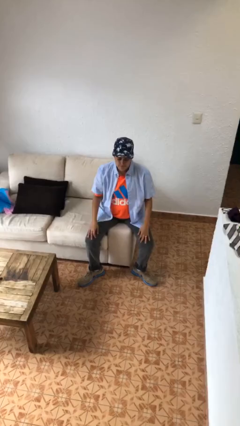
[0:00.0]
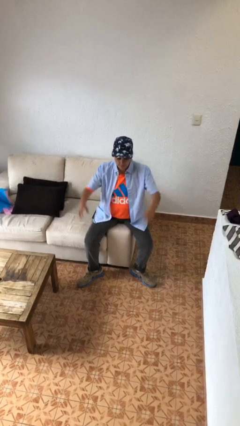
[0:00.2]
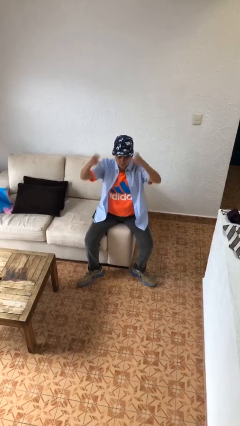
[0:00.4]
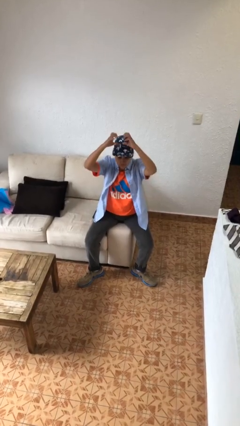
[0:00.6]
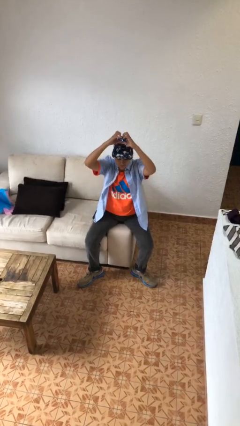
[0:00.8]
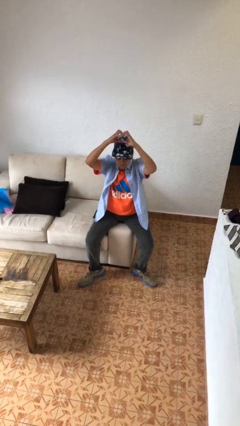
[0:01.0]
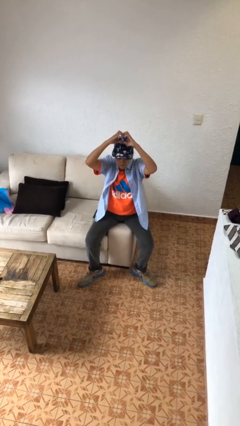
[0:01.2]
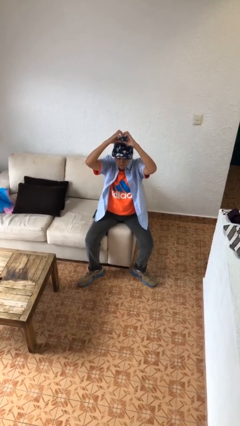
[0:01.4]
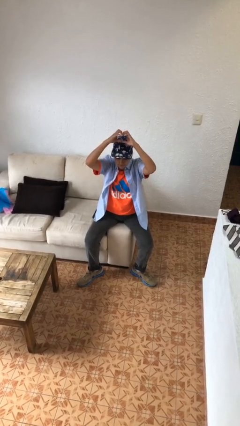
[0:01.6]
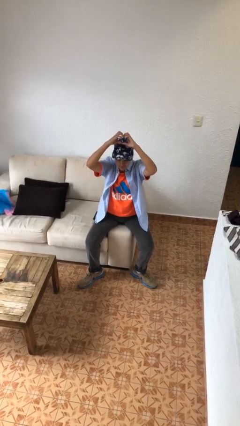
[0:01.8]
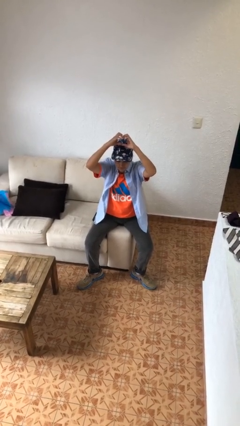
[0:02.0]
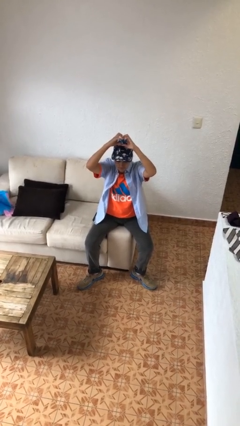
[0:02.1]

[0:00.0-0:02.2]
person gestures heart

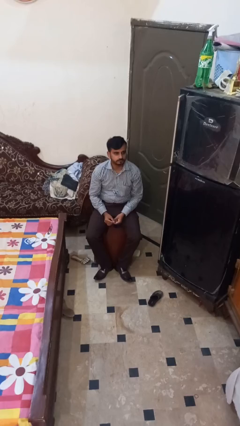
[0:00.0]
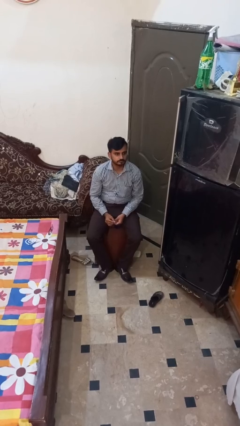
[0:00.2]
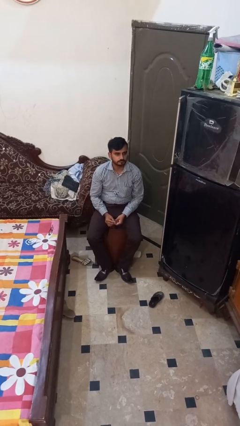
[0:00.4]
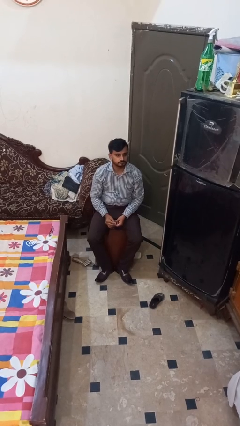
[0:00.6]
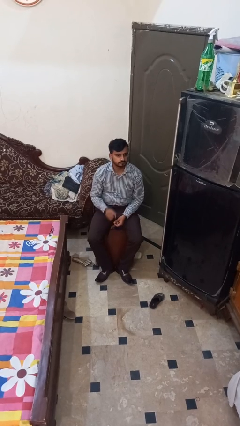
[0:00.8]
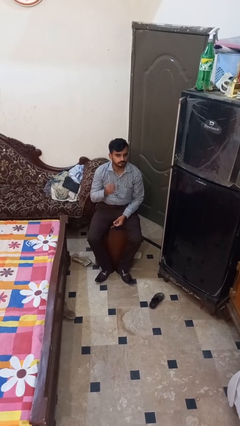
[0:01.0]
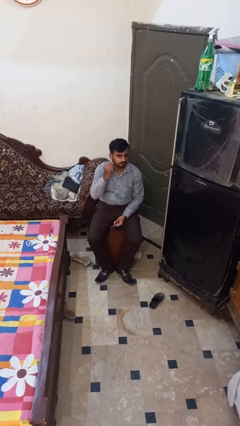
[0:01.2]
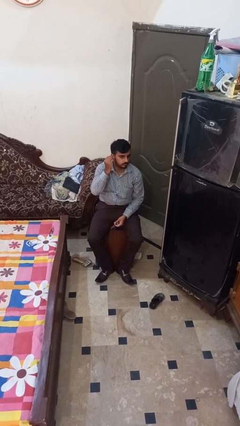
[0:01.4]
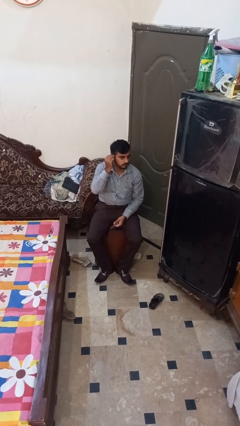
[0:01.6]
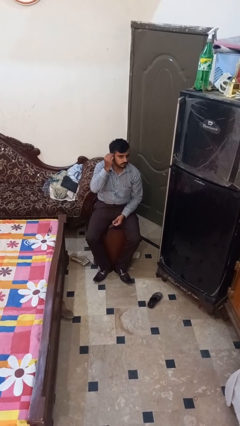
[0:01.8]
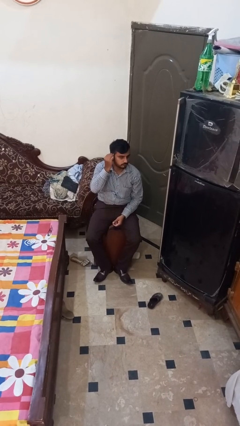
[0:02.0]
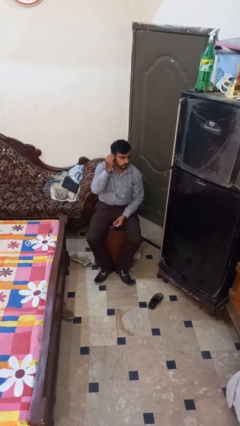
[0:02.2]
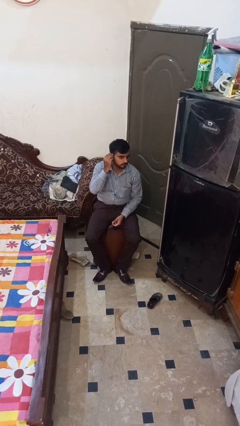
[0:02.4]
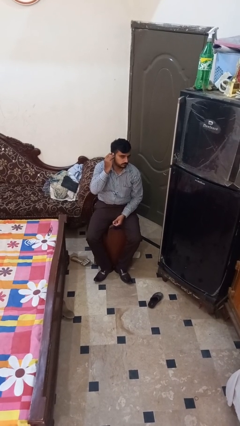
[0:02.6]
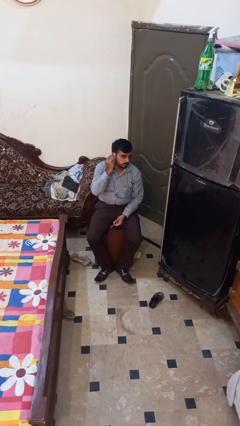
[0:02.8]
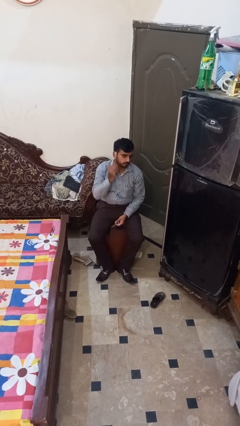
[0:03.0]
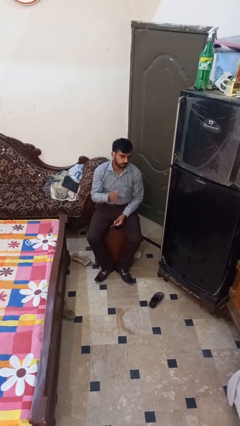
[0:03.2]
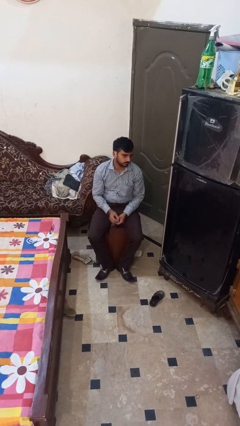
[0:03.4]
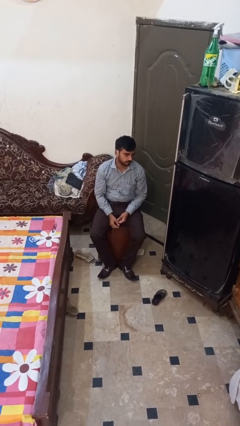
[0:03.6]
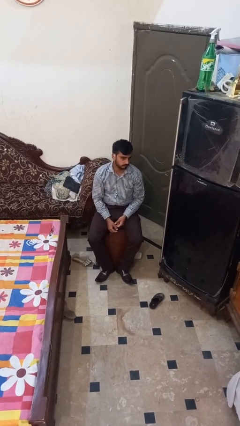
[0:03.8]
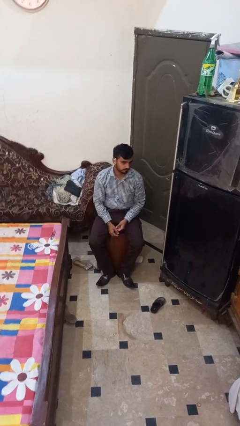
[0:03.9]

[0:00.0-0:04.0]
person puts on earrings

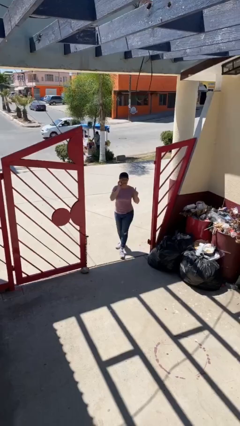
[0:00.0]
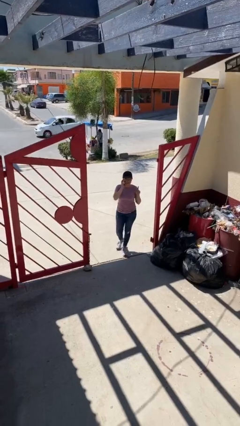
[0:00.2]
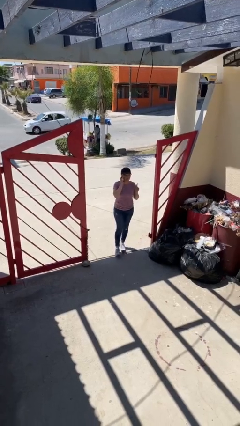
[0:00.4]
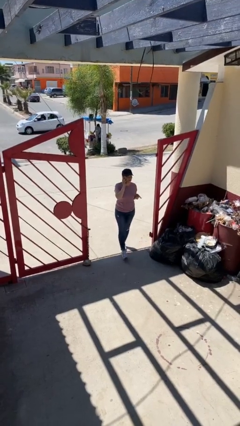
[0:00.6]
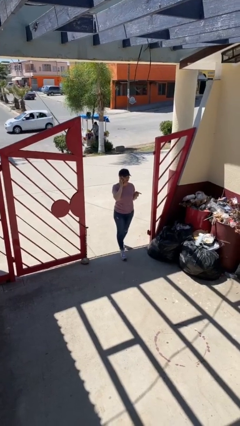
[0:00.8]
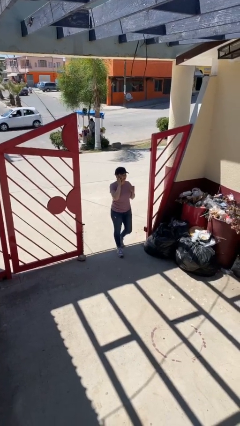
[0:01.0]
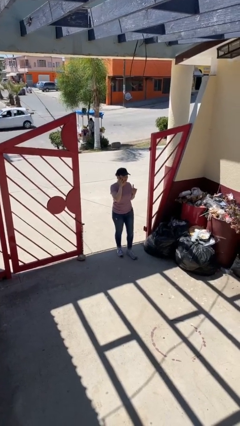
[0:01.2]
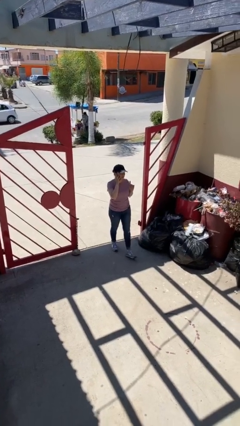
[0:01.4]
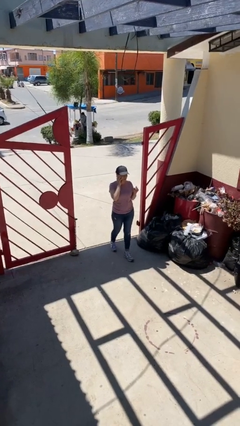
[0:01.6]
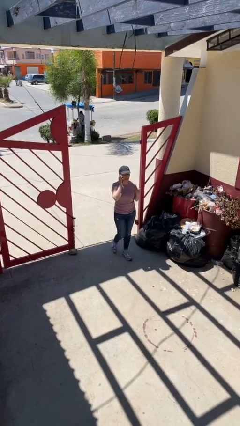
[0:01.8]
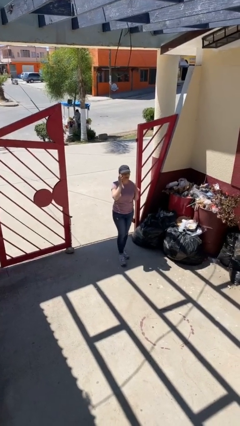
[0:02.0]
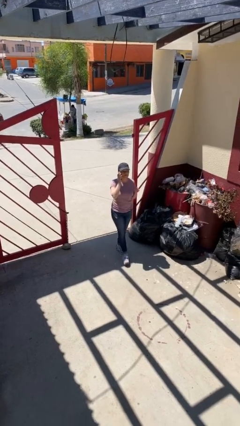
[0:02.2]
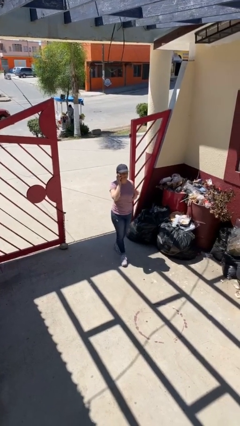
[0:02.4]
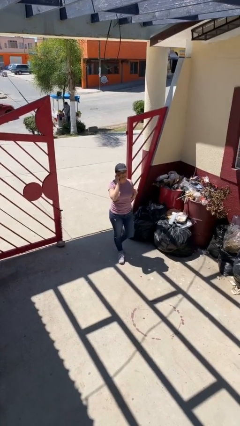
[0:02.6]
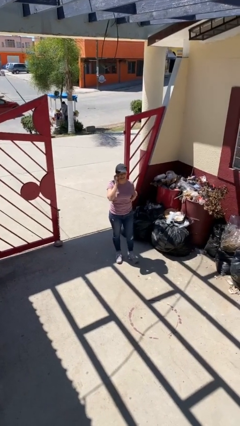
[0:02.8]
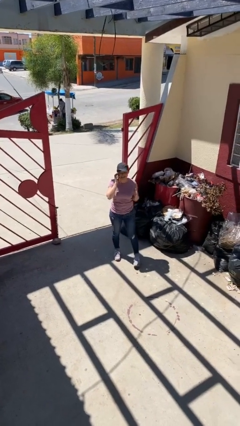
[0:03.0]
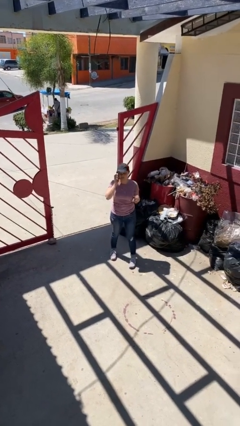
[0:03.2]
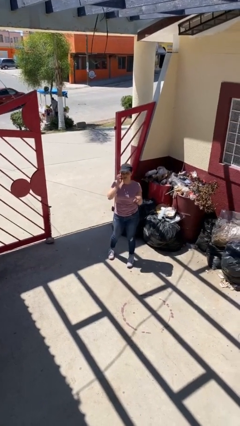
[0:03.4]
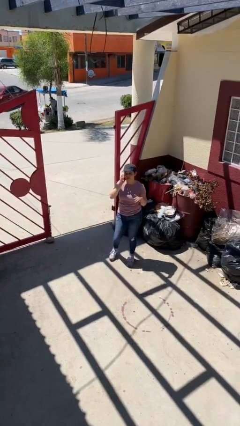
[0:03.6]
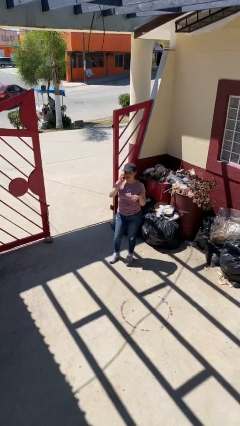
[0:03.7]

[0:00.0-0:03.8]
person enters scene through structure

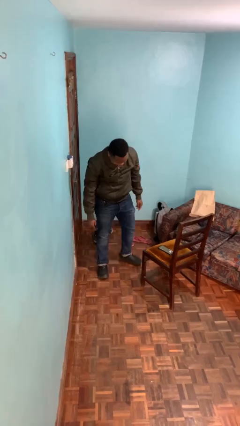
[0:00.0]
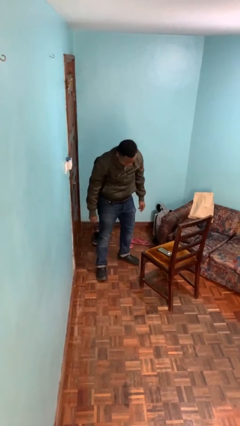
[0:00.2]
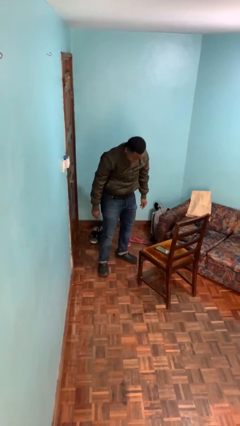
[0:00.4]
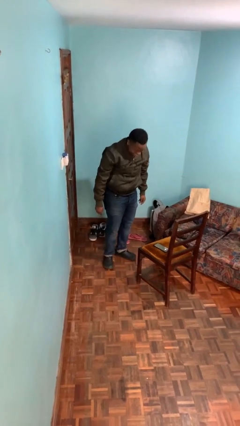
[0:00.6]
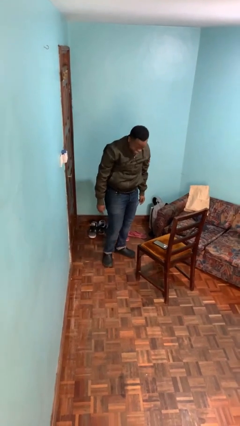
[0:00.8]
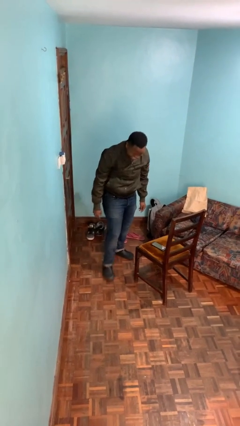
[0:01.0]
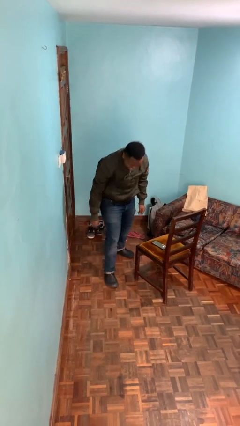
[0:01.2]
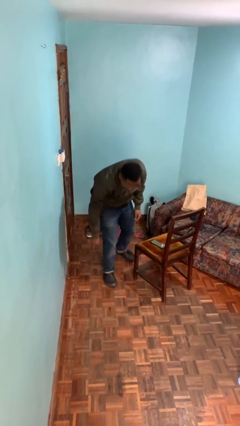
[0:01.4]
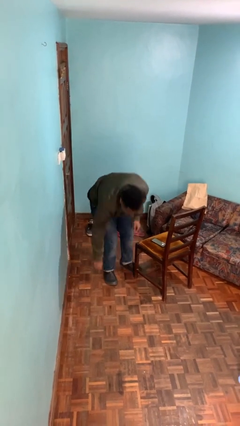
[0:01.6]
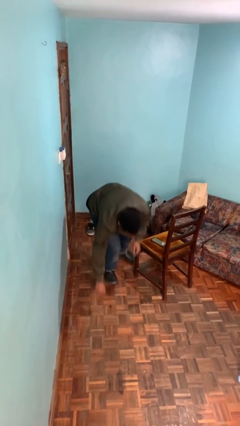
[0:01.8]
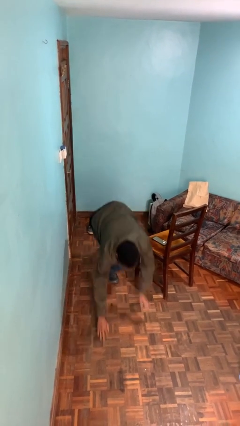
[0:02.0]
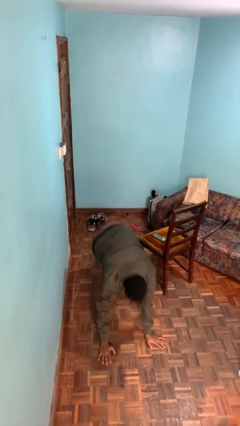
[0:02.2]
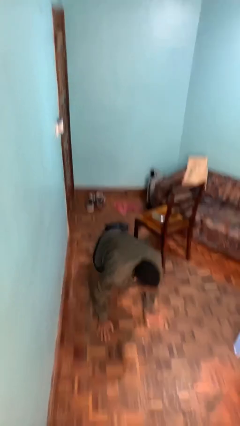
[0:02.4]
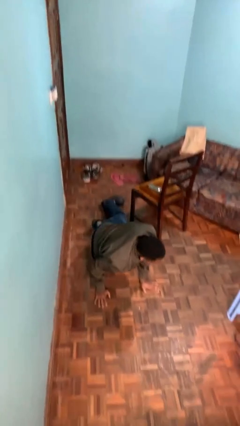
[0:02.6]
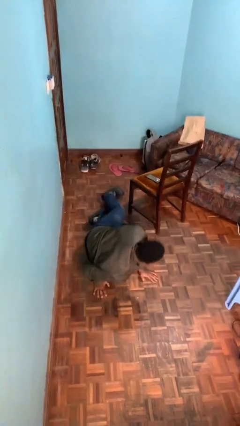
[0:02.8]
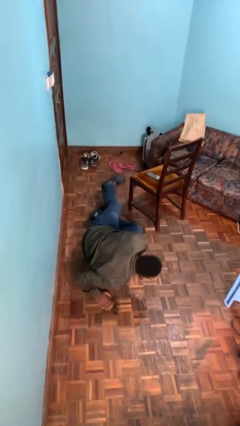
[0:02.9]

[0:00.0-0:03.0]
person trips on object on floor

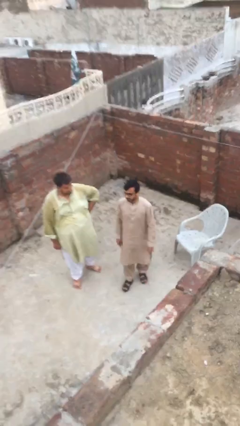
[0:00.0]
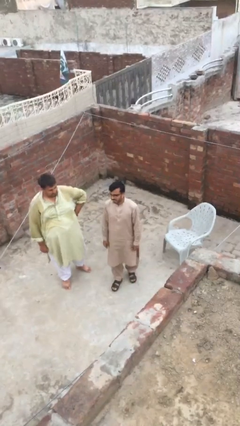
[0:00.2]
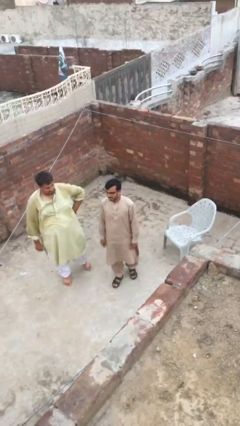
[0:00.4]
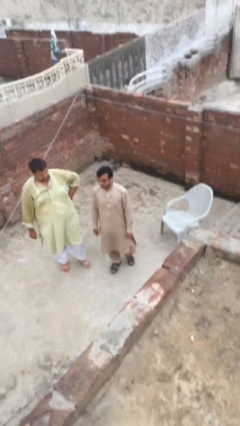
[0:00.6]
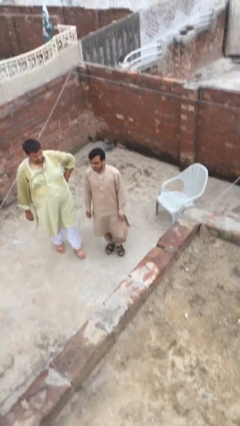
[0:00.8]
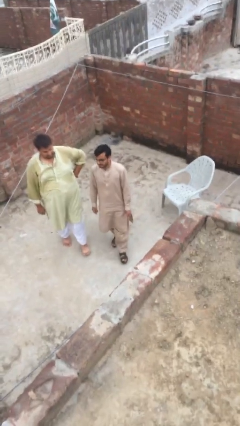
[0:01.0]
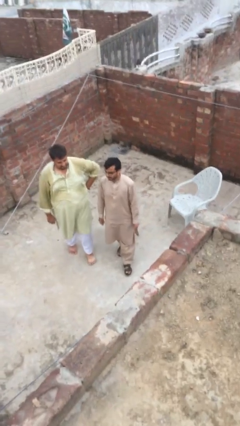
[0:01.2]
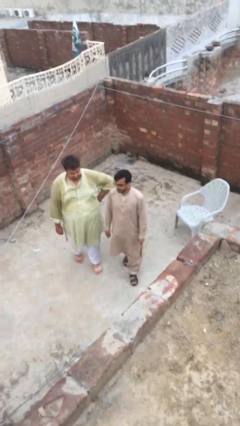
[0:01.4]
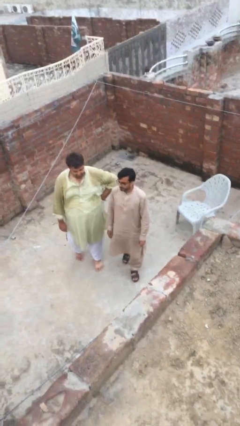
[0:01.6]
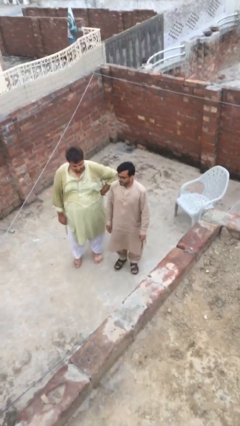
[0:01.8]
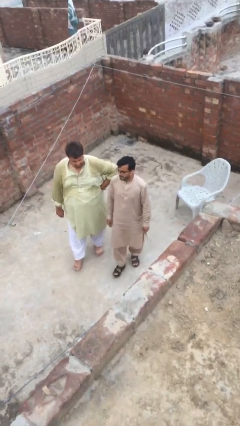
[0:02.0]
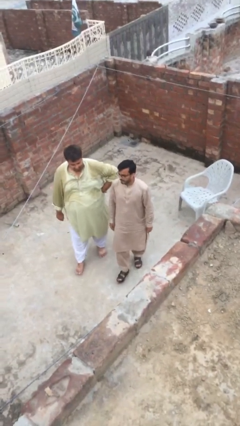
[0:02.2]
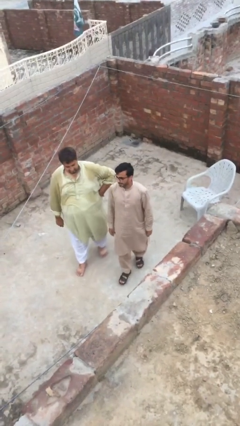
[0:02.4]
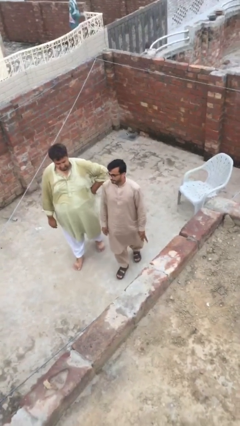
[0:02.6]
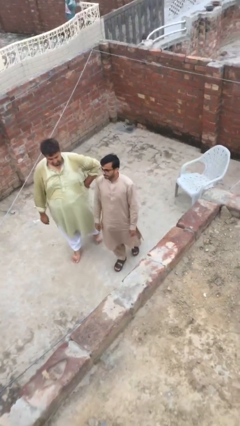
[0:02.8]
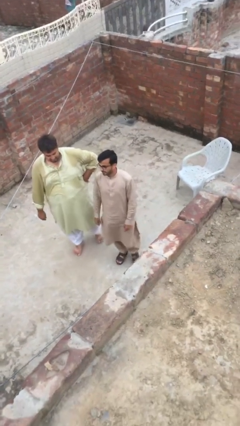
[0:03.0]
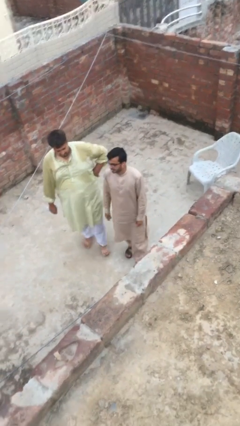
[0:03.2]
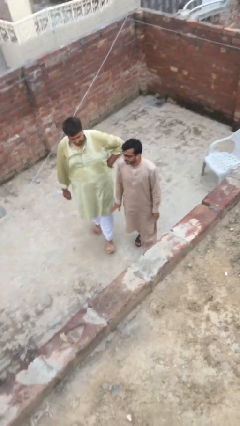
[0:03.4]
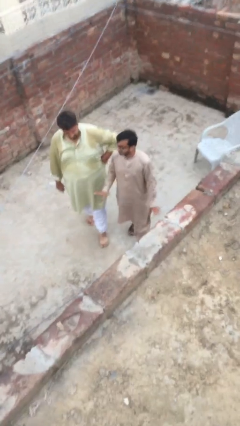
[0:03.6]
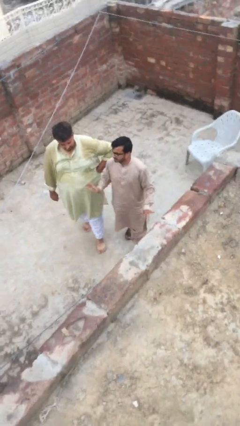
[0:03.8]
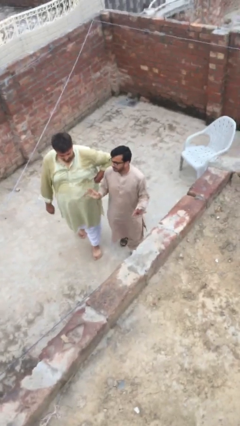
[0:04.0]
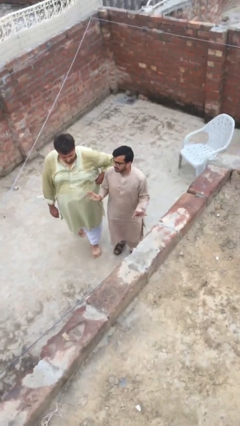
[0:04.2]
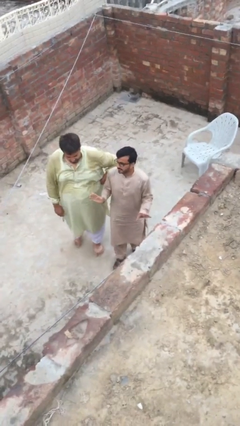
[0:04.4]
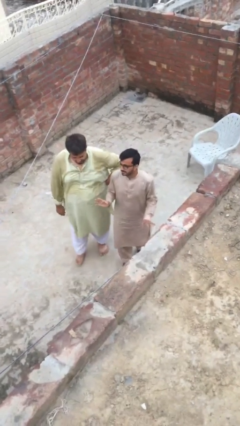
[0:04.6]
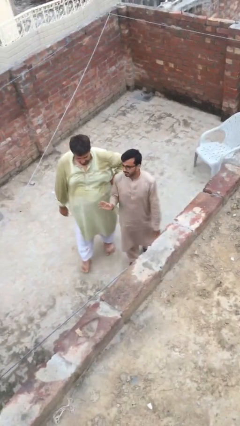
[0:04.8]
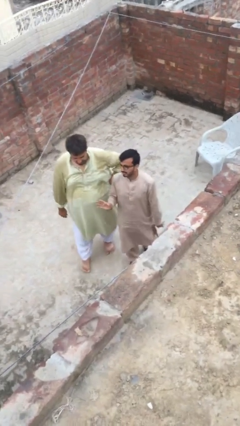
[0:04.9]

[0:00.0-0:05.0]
person talks to person
